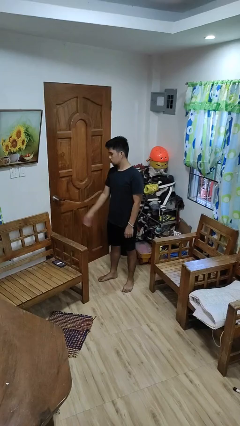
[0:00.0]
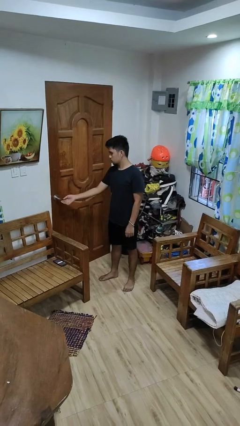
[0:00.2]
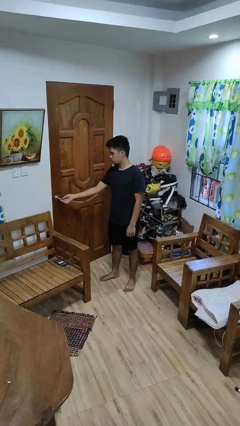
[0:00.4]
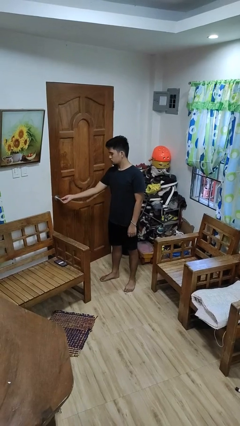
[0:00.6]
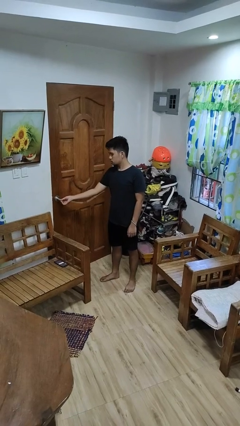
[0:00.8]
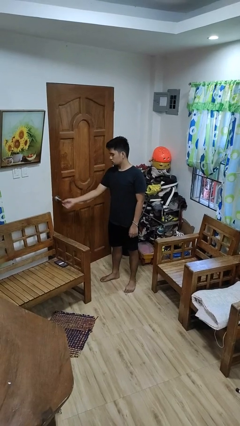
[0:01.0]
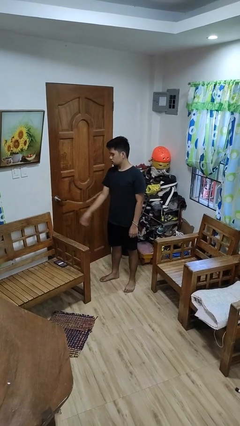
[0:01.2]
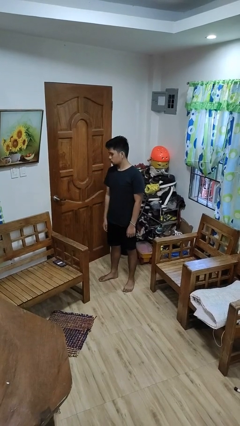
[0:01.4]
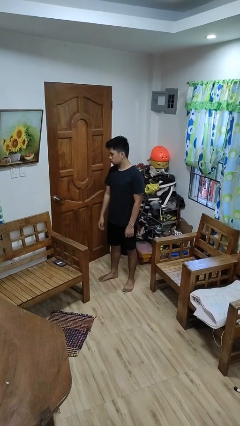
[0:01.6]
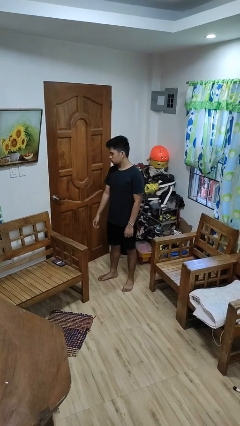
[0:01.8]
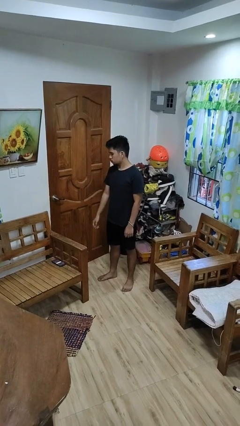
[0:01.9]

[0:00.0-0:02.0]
person locks door with keys

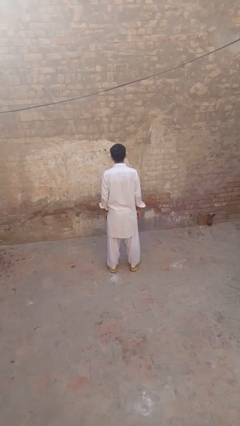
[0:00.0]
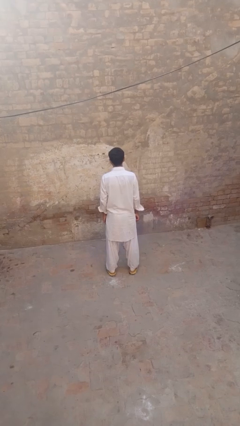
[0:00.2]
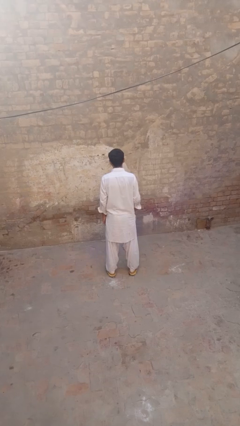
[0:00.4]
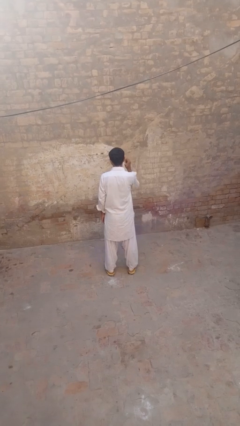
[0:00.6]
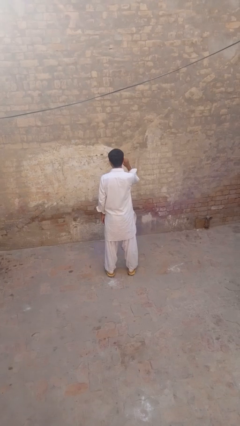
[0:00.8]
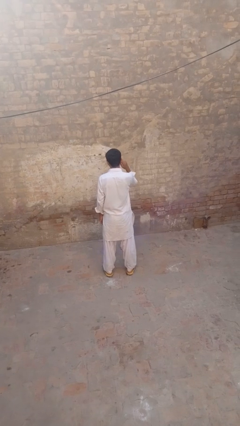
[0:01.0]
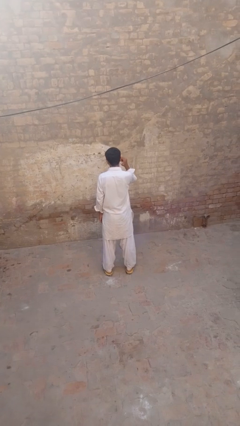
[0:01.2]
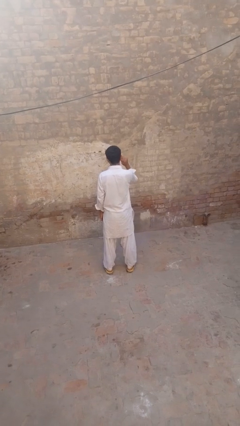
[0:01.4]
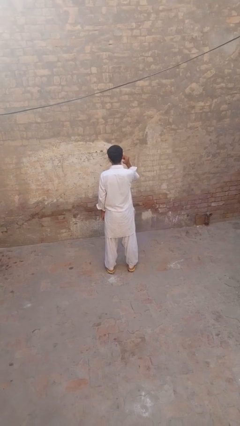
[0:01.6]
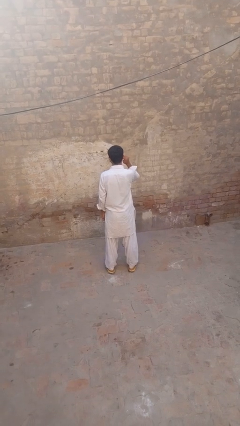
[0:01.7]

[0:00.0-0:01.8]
person touches earlobe

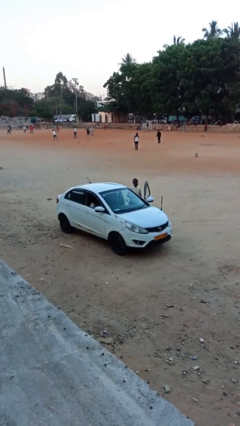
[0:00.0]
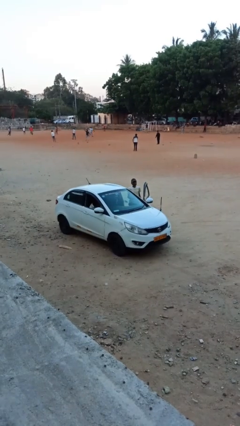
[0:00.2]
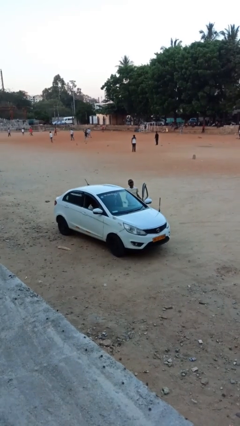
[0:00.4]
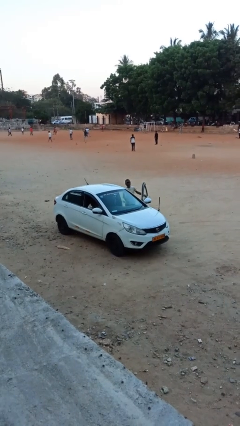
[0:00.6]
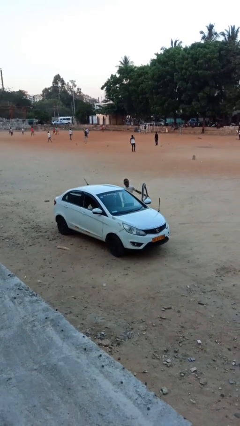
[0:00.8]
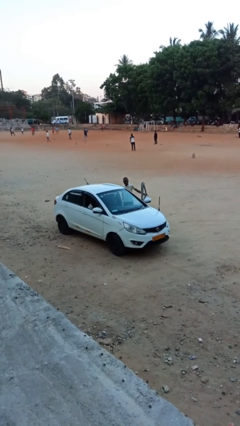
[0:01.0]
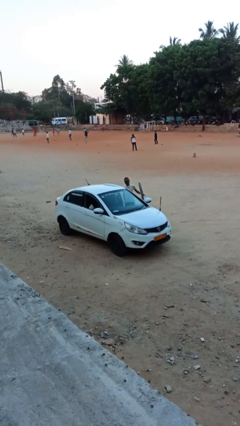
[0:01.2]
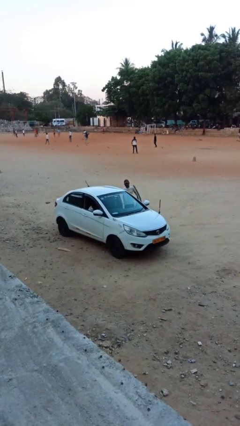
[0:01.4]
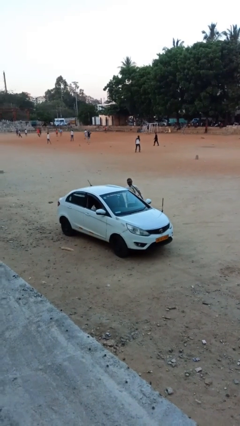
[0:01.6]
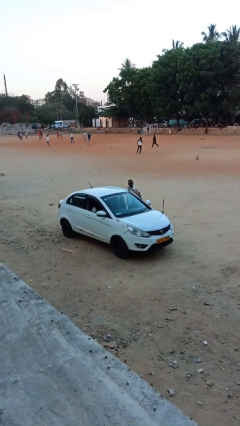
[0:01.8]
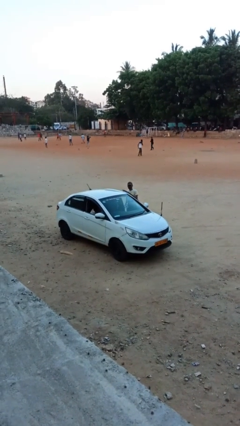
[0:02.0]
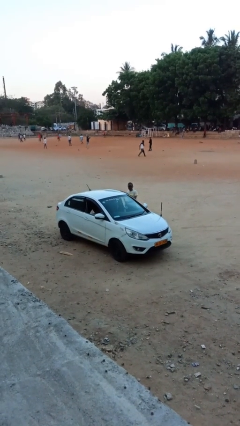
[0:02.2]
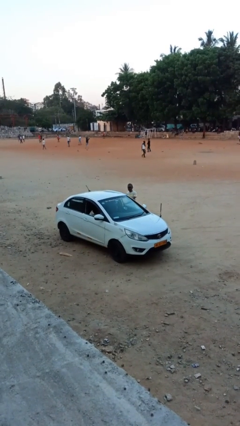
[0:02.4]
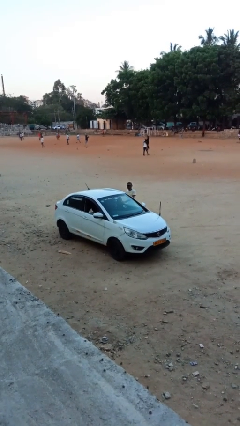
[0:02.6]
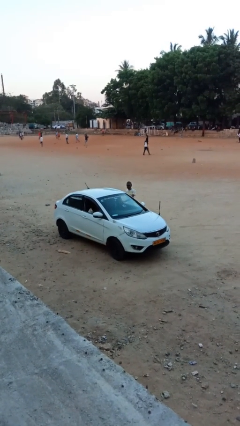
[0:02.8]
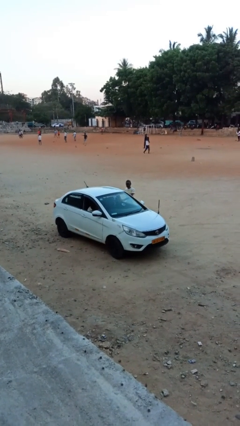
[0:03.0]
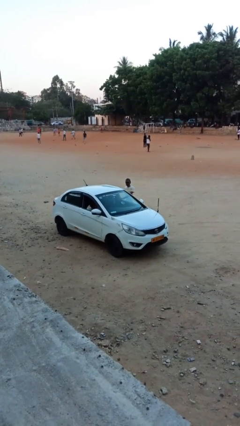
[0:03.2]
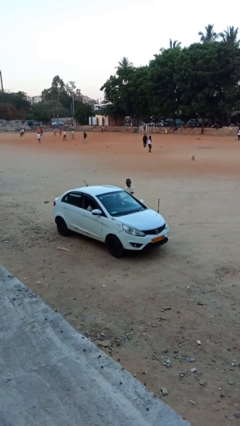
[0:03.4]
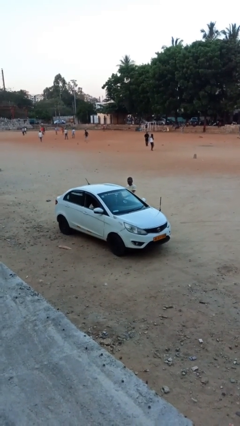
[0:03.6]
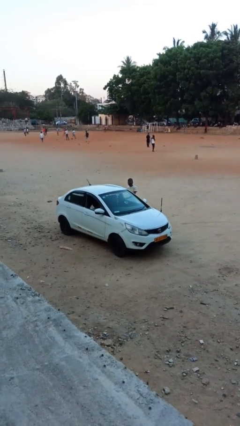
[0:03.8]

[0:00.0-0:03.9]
car drops off person

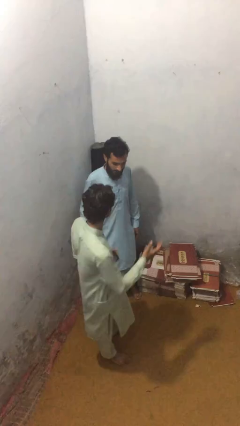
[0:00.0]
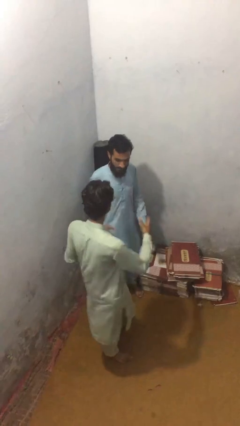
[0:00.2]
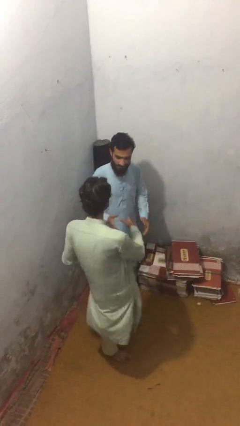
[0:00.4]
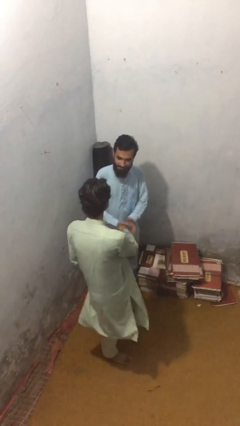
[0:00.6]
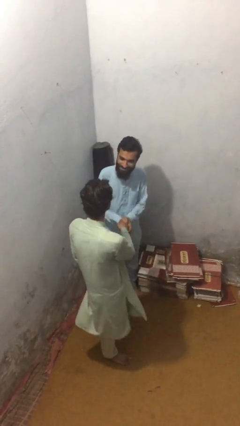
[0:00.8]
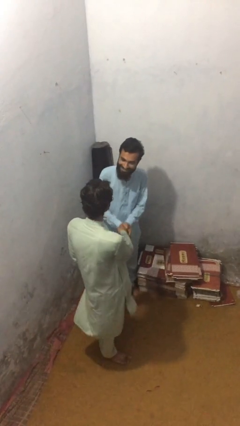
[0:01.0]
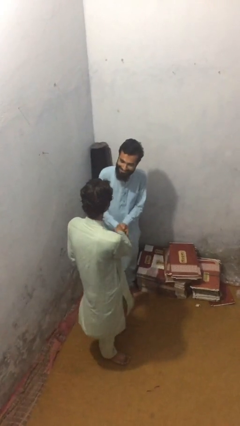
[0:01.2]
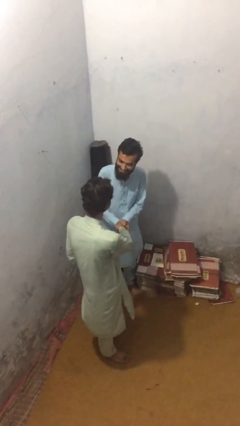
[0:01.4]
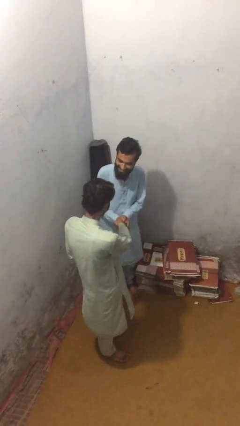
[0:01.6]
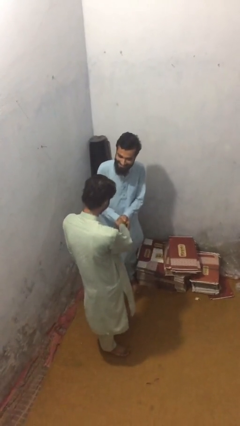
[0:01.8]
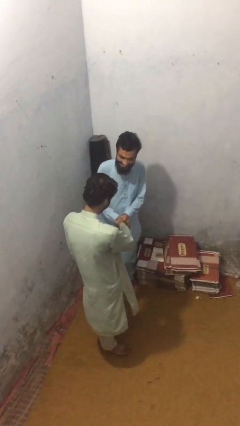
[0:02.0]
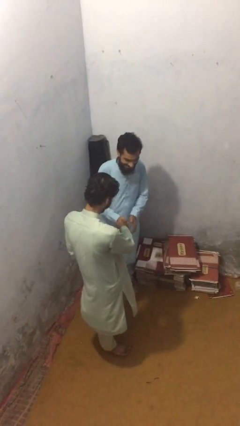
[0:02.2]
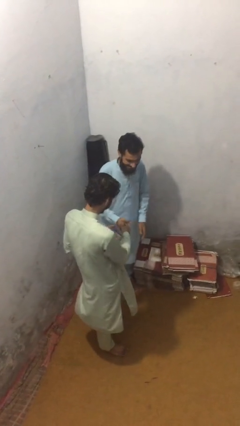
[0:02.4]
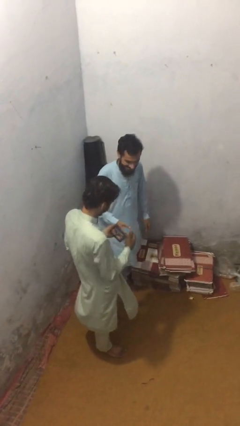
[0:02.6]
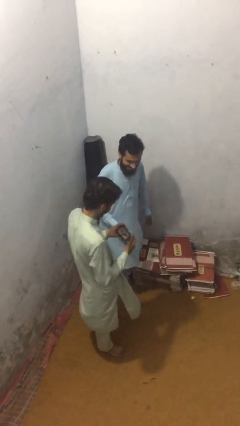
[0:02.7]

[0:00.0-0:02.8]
person shakes hand

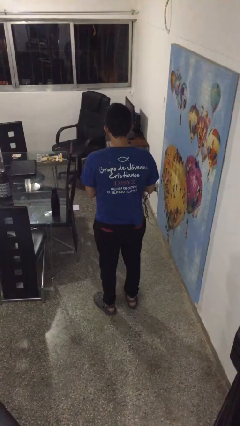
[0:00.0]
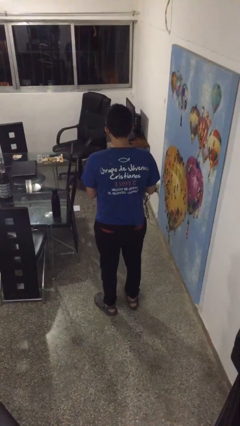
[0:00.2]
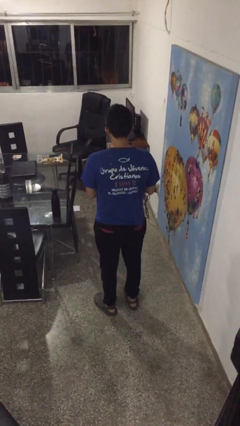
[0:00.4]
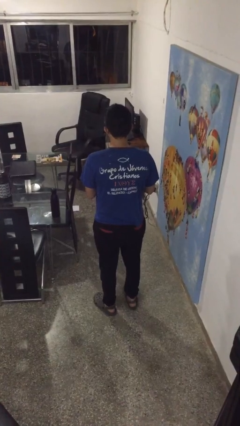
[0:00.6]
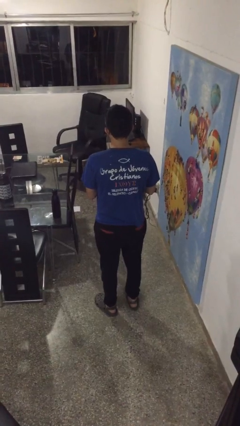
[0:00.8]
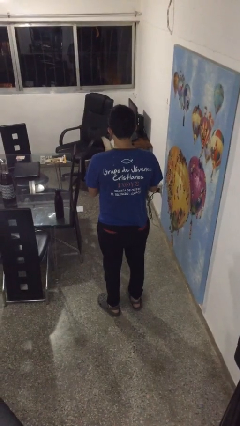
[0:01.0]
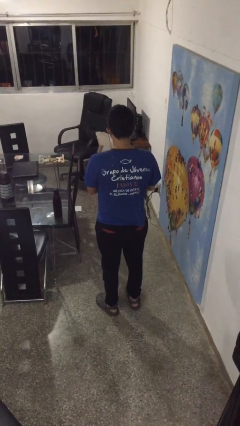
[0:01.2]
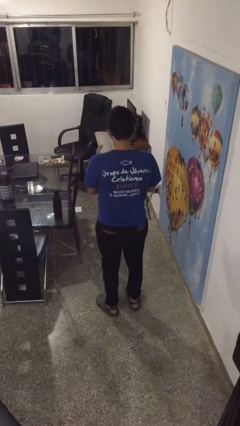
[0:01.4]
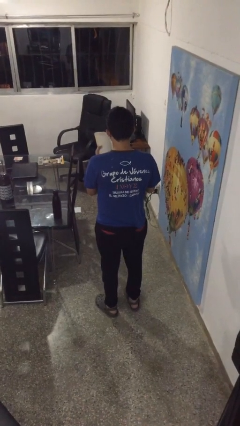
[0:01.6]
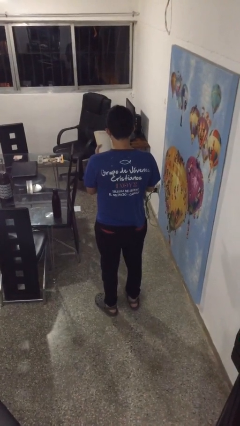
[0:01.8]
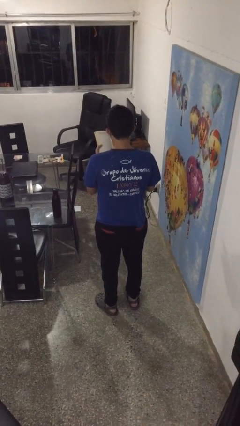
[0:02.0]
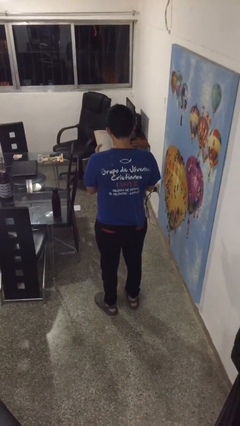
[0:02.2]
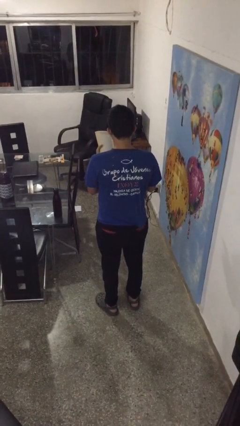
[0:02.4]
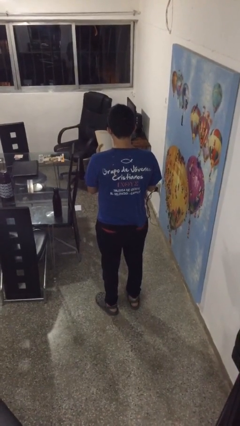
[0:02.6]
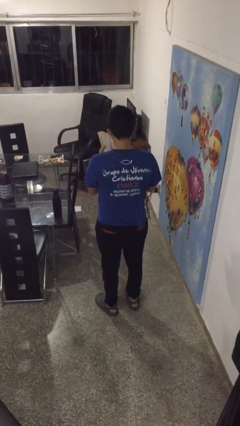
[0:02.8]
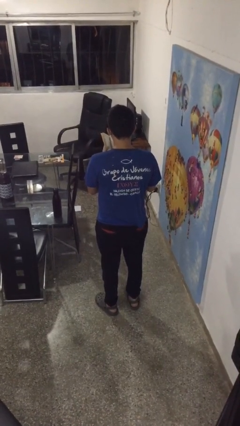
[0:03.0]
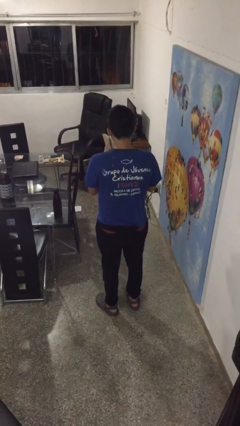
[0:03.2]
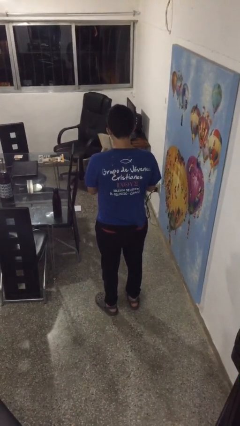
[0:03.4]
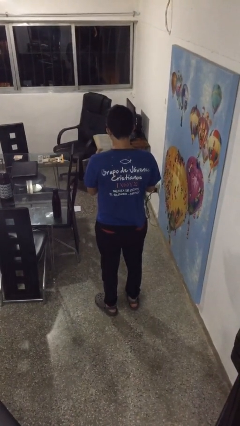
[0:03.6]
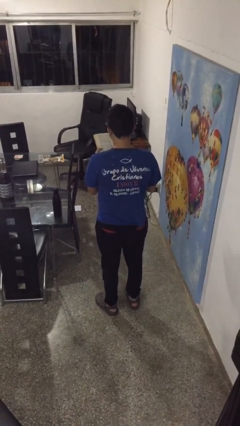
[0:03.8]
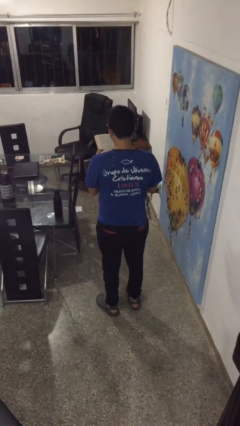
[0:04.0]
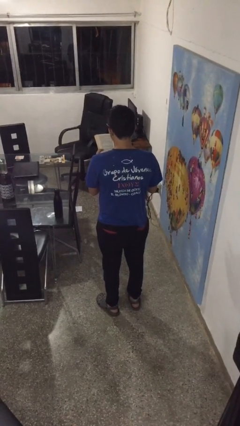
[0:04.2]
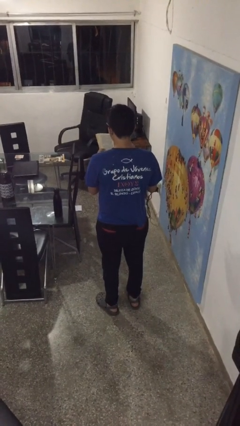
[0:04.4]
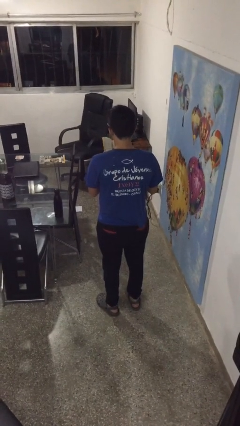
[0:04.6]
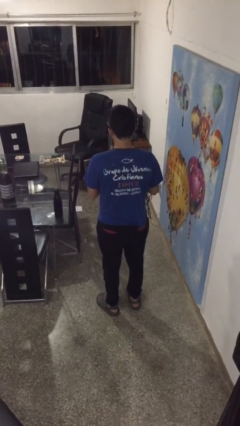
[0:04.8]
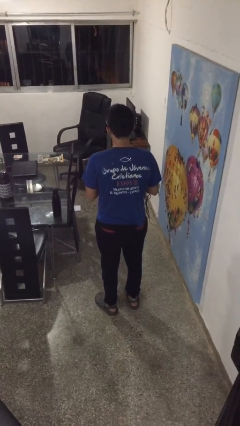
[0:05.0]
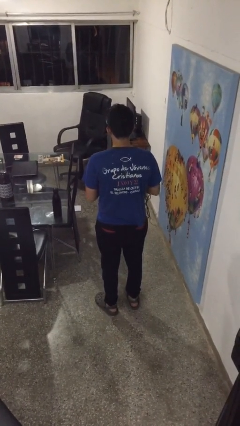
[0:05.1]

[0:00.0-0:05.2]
person reads book

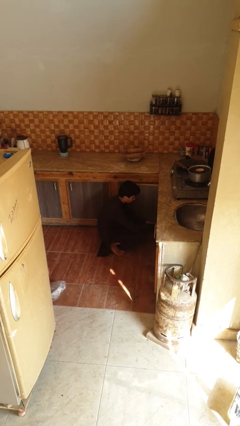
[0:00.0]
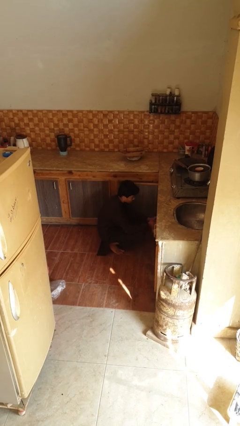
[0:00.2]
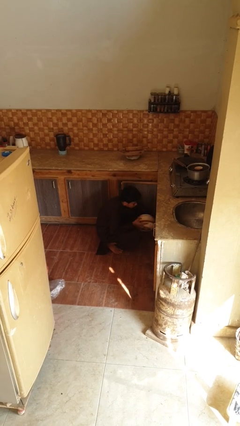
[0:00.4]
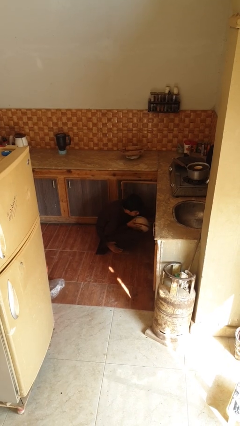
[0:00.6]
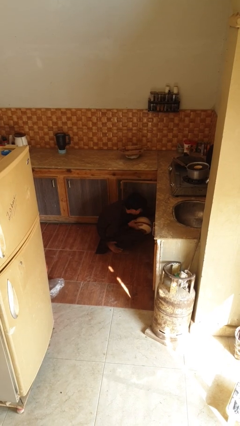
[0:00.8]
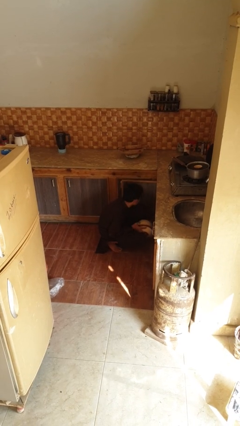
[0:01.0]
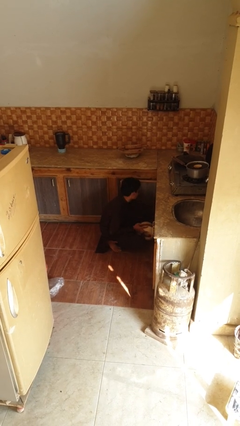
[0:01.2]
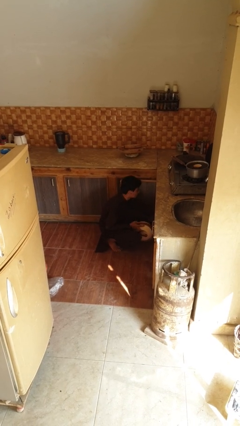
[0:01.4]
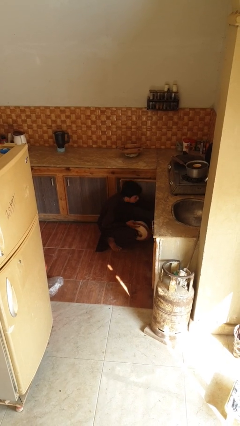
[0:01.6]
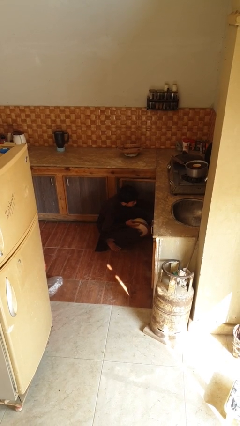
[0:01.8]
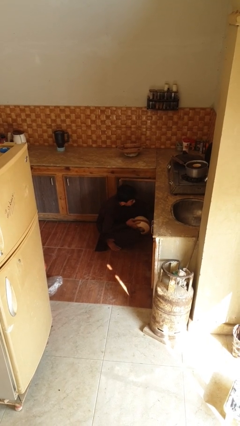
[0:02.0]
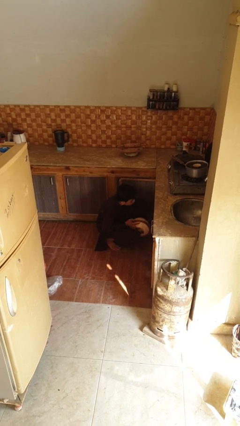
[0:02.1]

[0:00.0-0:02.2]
person searches in kitchen drawer
